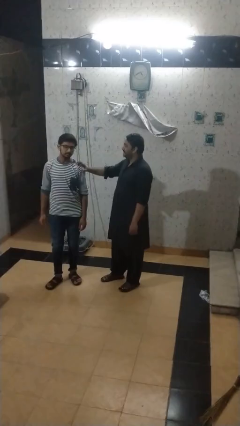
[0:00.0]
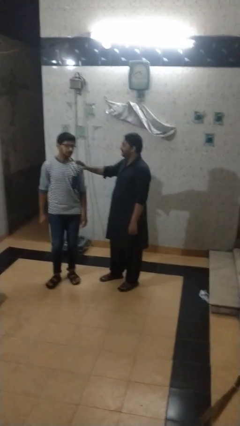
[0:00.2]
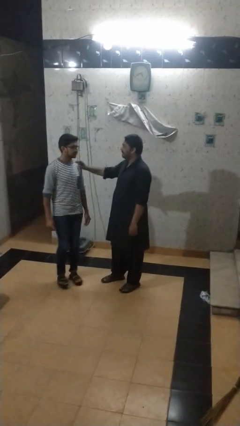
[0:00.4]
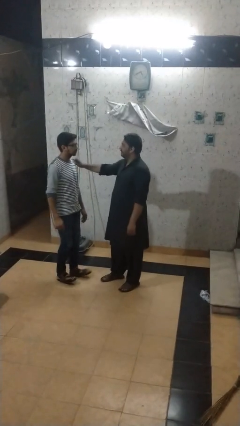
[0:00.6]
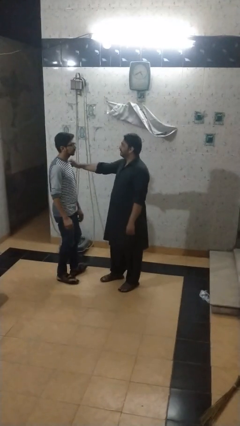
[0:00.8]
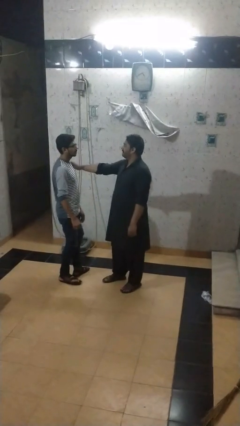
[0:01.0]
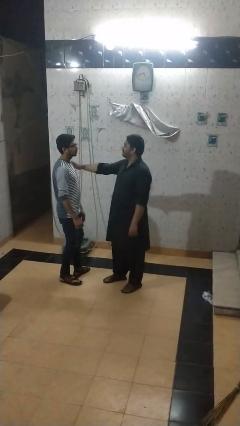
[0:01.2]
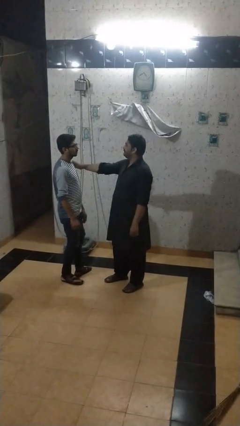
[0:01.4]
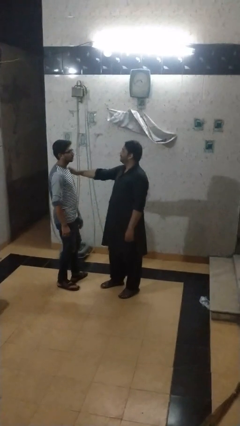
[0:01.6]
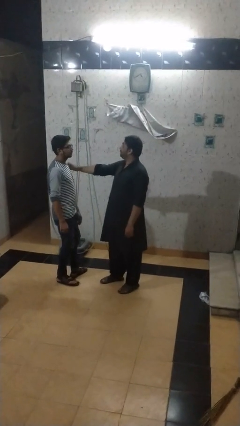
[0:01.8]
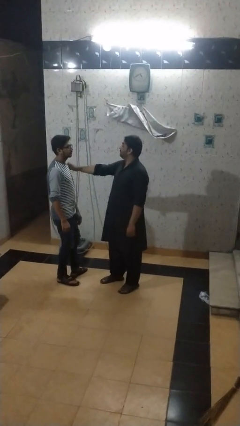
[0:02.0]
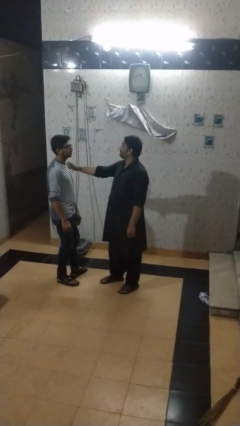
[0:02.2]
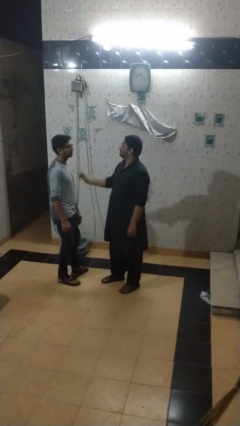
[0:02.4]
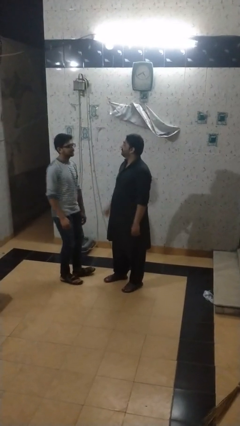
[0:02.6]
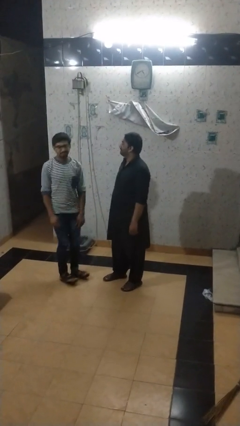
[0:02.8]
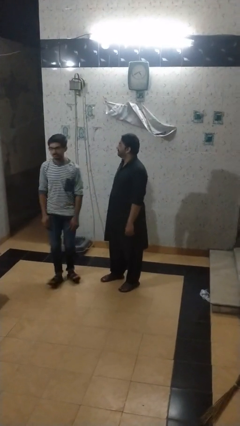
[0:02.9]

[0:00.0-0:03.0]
person spins person around

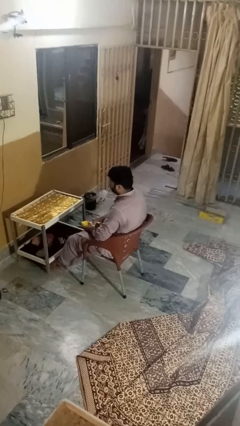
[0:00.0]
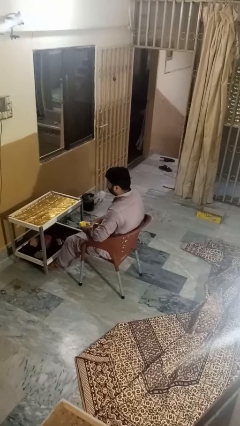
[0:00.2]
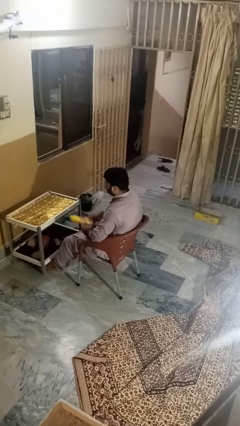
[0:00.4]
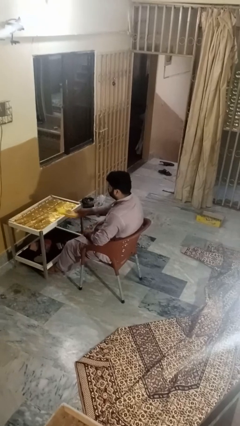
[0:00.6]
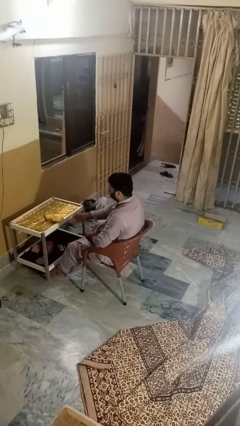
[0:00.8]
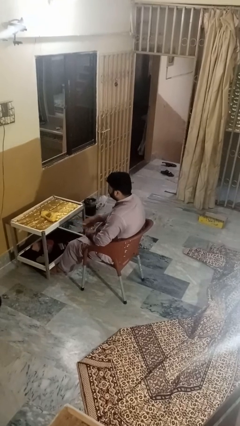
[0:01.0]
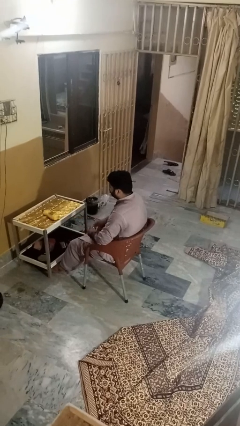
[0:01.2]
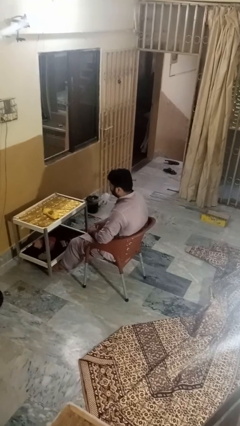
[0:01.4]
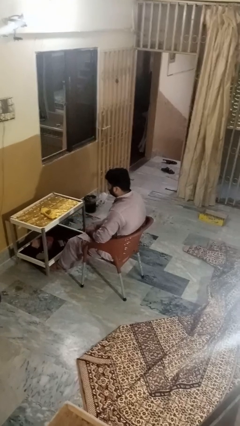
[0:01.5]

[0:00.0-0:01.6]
person throws object on table

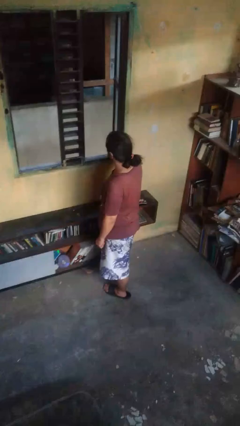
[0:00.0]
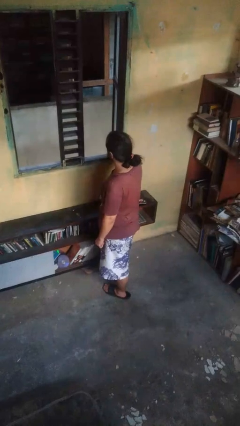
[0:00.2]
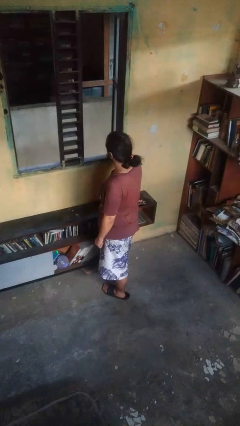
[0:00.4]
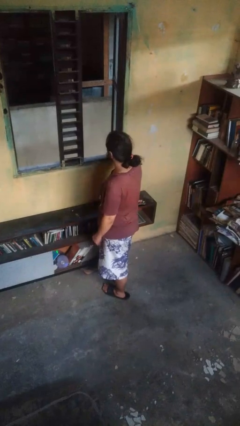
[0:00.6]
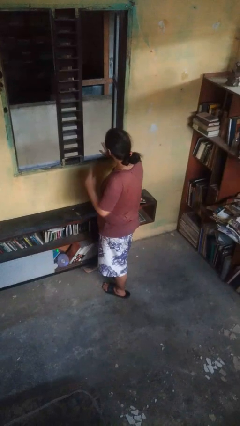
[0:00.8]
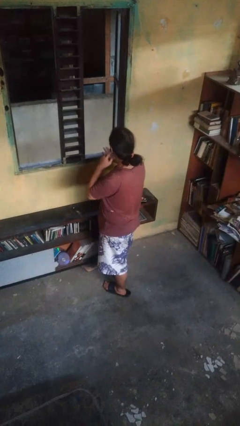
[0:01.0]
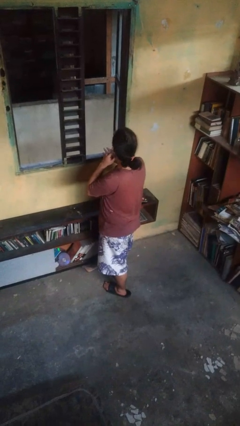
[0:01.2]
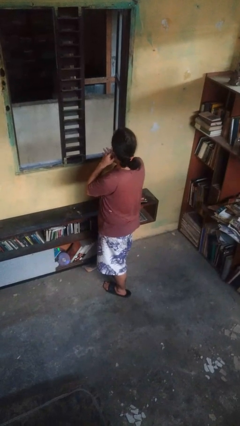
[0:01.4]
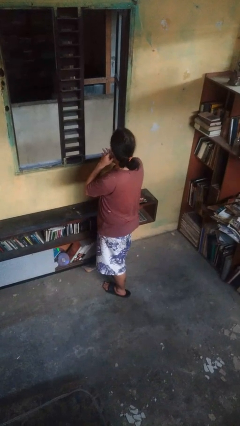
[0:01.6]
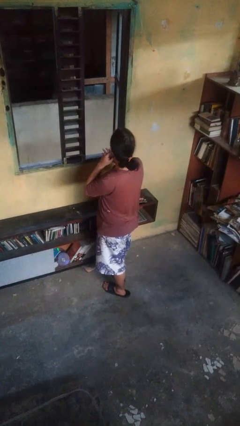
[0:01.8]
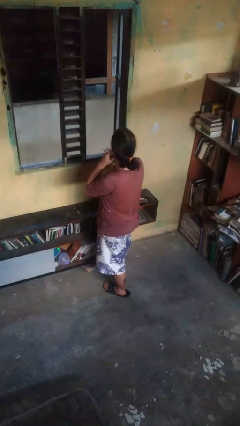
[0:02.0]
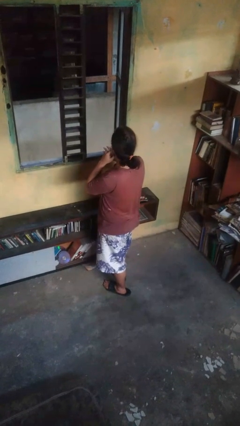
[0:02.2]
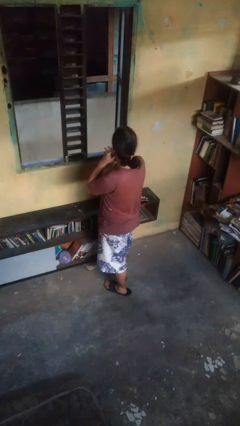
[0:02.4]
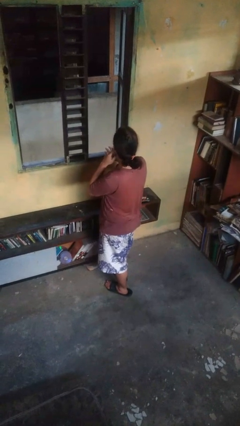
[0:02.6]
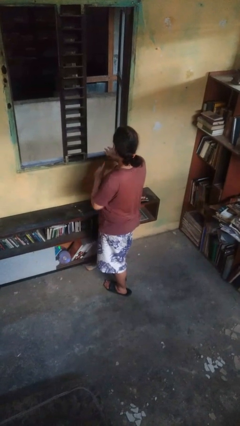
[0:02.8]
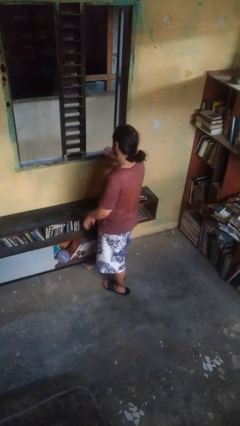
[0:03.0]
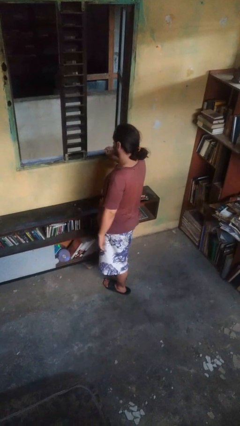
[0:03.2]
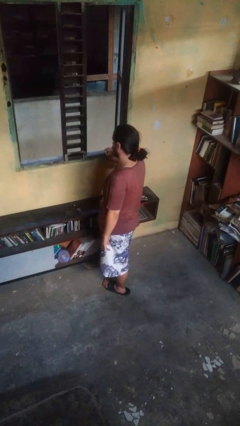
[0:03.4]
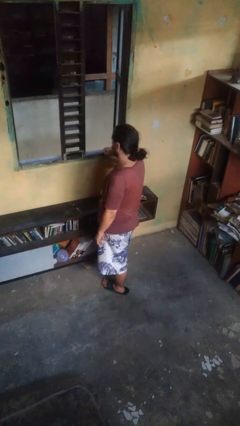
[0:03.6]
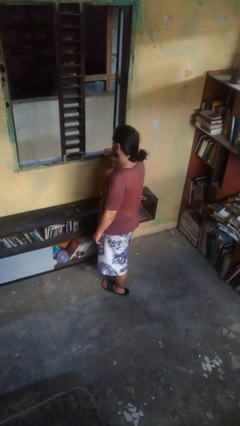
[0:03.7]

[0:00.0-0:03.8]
person gestures listen closely

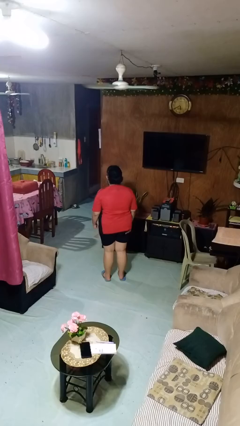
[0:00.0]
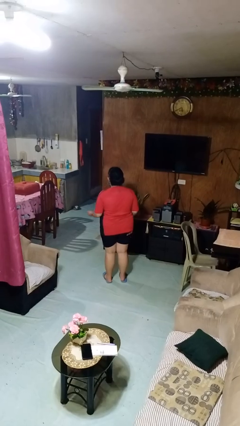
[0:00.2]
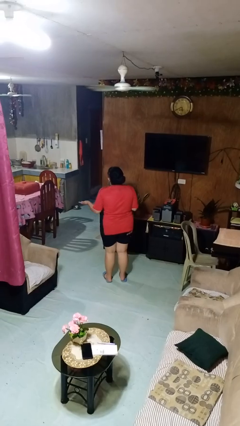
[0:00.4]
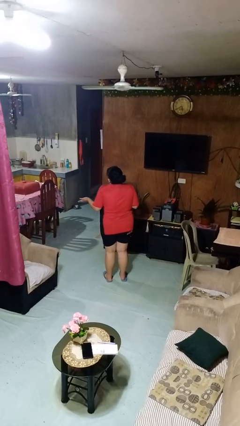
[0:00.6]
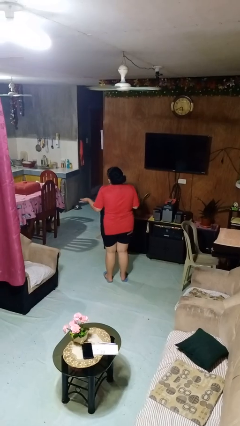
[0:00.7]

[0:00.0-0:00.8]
person shrugs

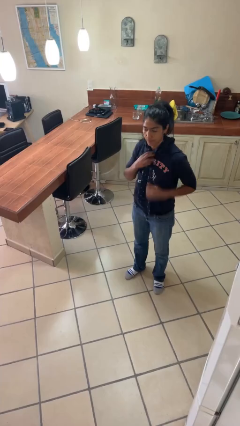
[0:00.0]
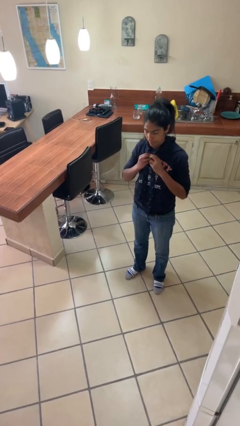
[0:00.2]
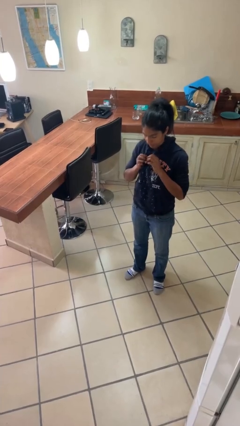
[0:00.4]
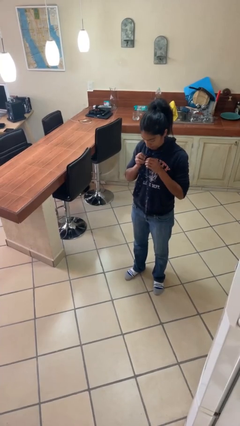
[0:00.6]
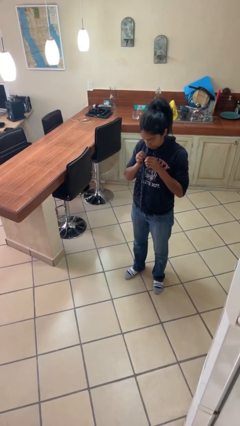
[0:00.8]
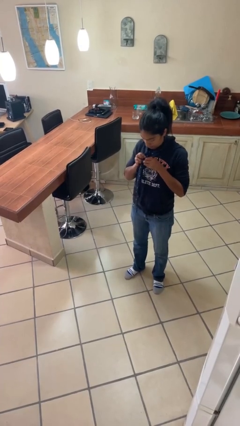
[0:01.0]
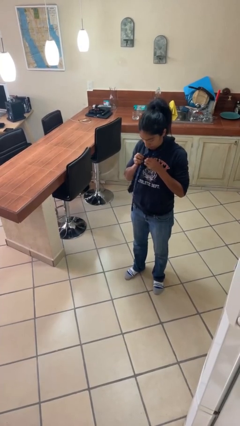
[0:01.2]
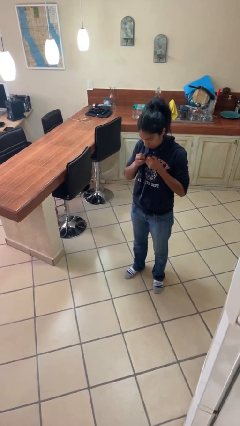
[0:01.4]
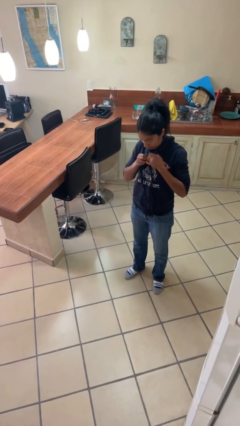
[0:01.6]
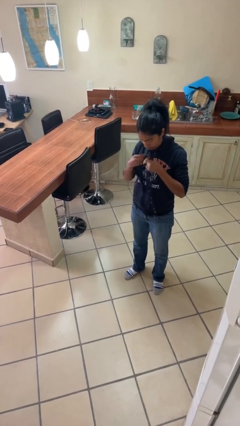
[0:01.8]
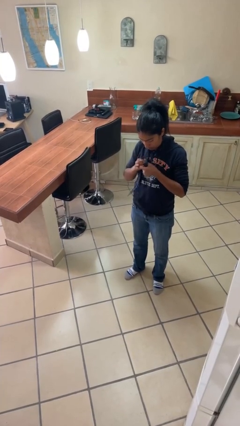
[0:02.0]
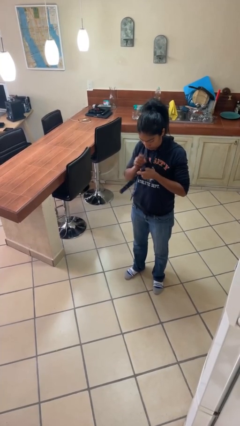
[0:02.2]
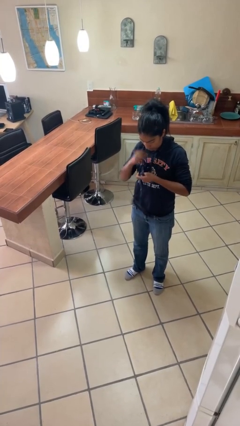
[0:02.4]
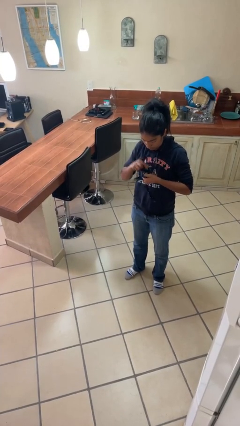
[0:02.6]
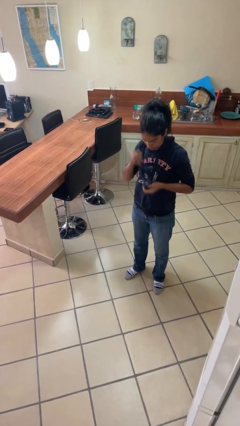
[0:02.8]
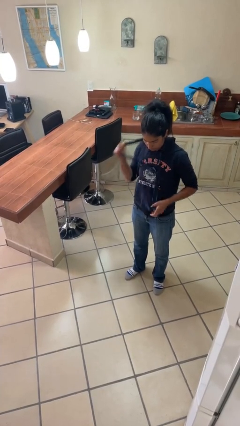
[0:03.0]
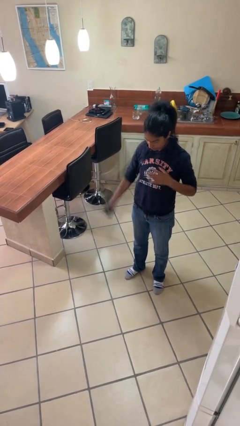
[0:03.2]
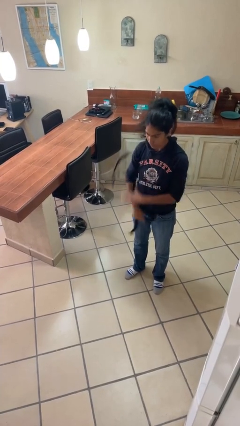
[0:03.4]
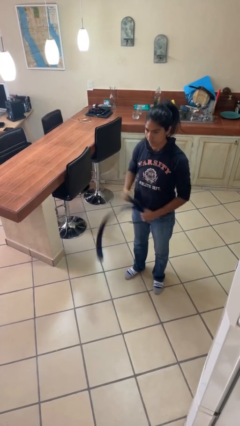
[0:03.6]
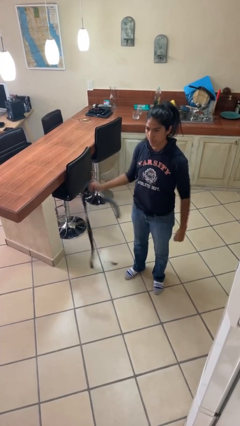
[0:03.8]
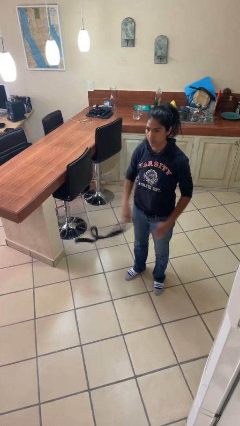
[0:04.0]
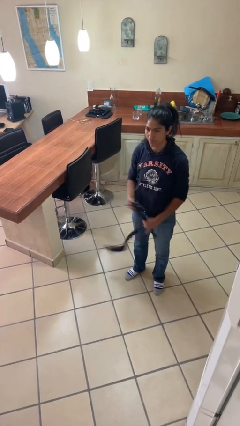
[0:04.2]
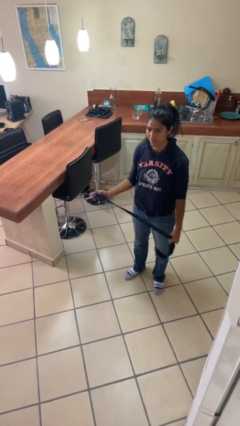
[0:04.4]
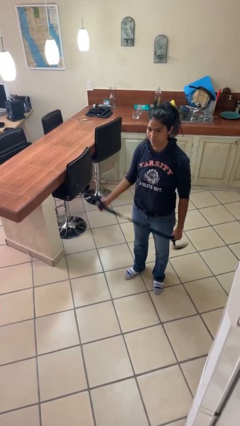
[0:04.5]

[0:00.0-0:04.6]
person takes off necktie

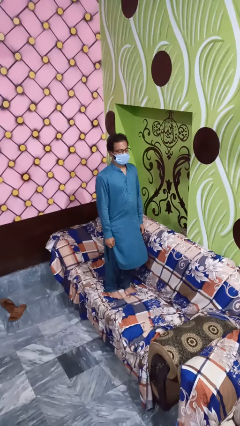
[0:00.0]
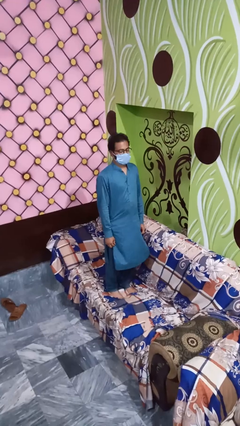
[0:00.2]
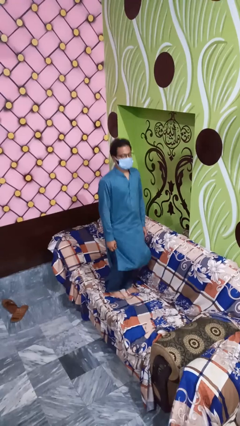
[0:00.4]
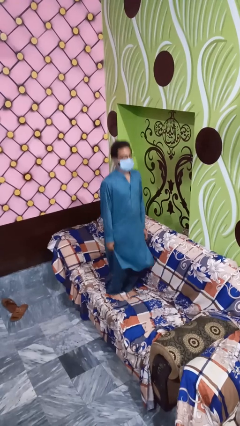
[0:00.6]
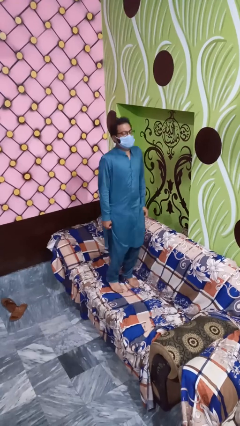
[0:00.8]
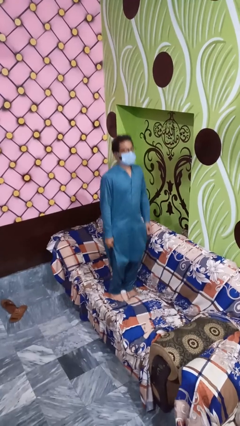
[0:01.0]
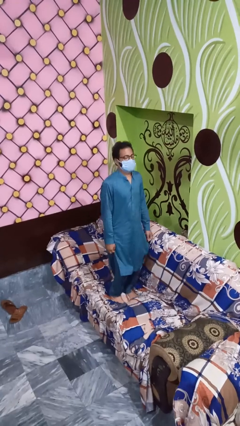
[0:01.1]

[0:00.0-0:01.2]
person jumps on couch

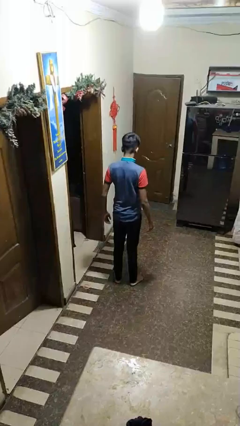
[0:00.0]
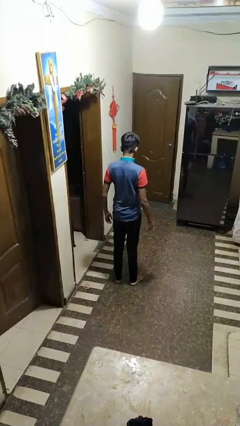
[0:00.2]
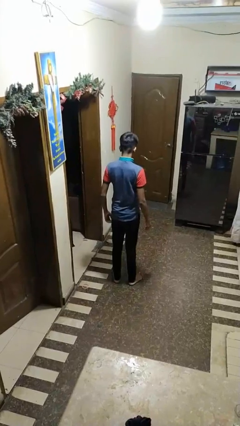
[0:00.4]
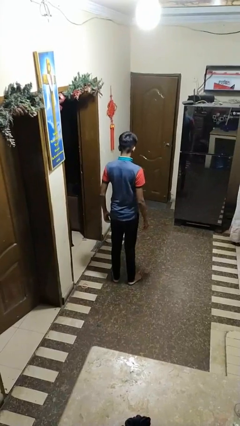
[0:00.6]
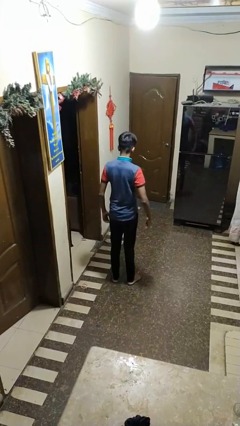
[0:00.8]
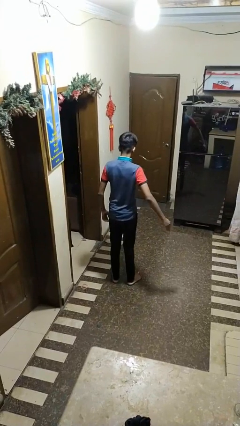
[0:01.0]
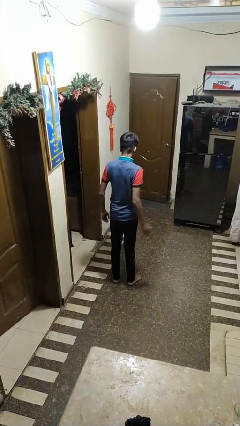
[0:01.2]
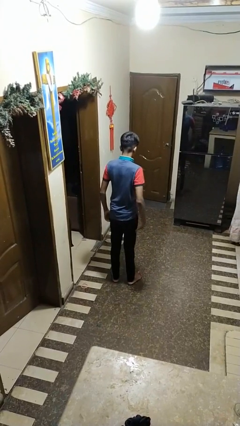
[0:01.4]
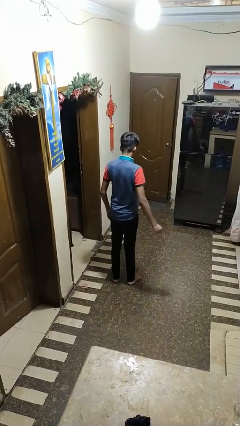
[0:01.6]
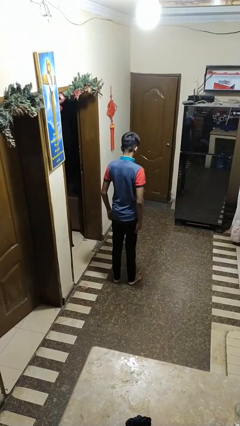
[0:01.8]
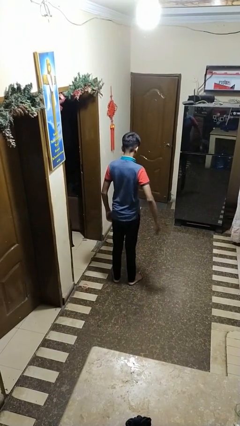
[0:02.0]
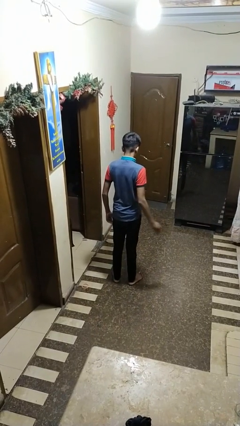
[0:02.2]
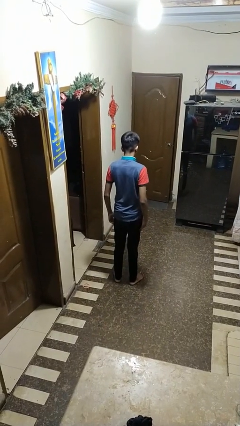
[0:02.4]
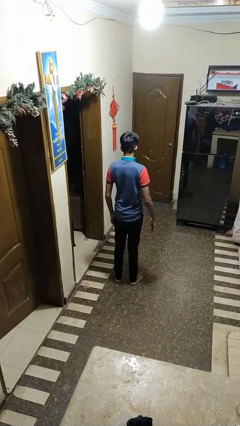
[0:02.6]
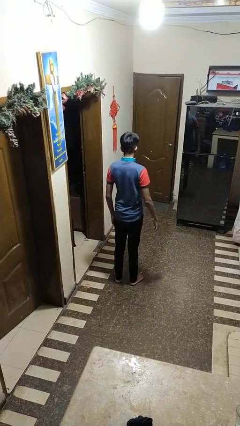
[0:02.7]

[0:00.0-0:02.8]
person slaps hands on thighs
